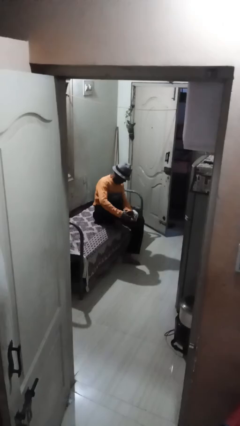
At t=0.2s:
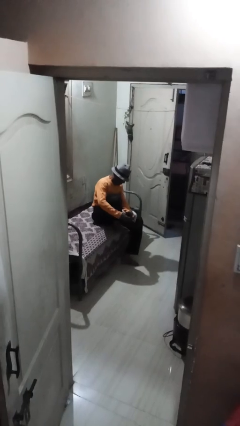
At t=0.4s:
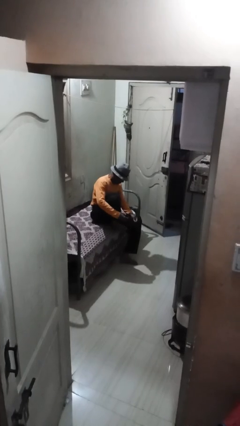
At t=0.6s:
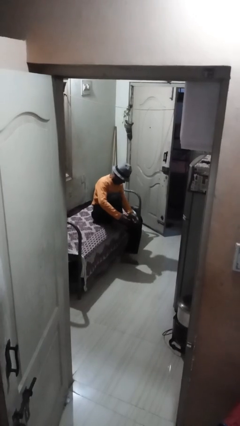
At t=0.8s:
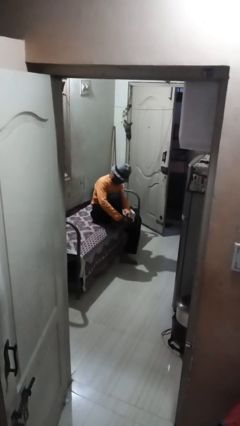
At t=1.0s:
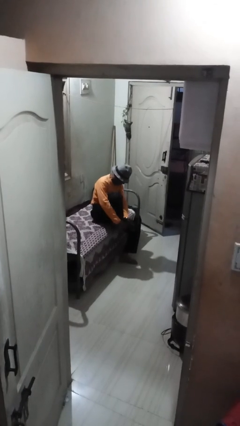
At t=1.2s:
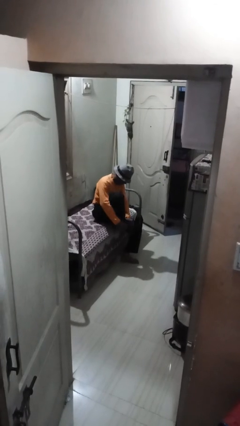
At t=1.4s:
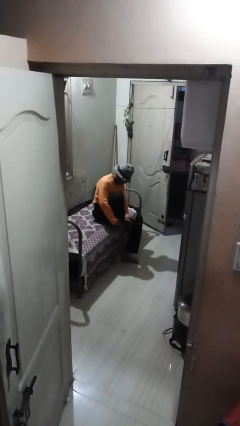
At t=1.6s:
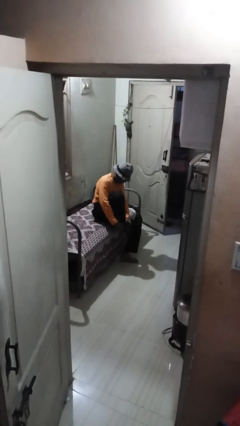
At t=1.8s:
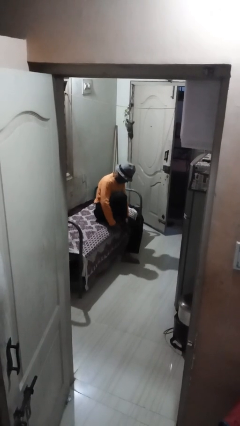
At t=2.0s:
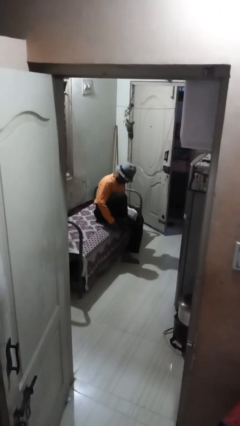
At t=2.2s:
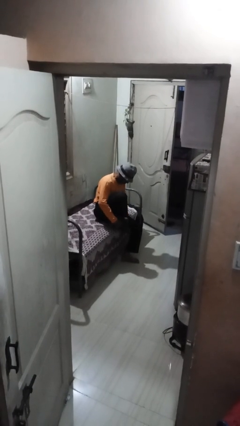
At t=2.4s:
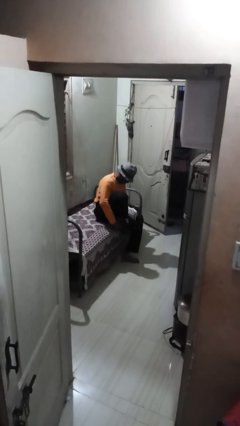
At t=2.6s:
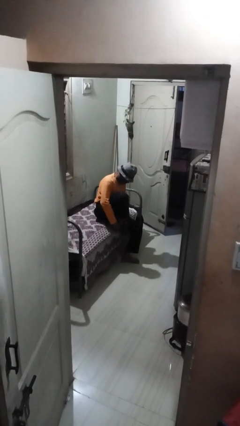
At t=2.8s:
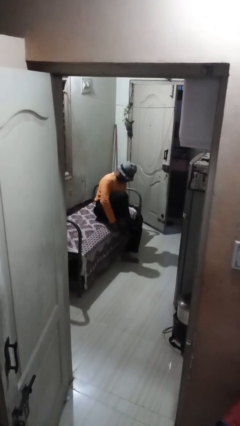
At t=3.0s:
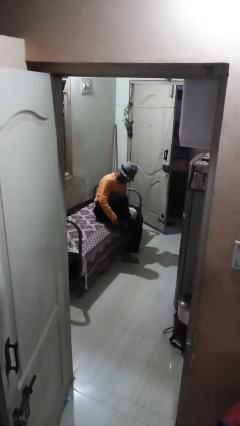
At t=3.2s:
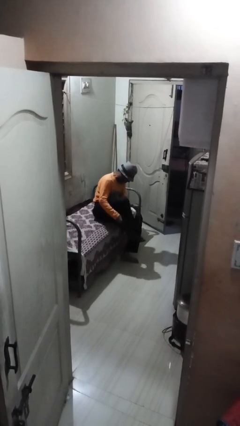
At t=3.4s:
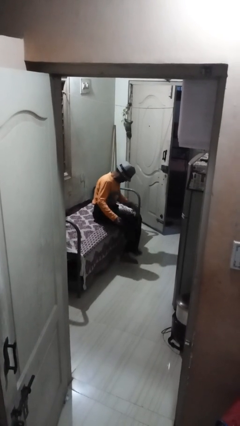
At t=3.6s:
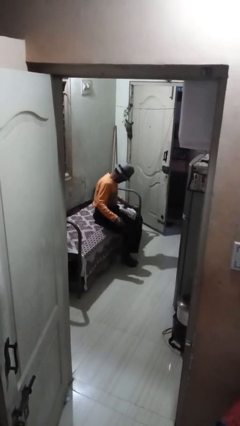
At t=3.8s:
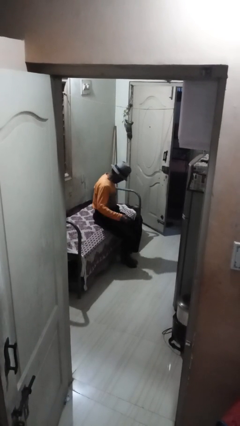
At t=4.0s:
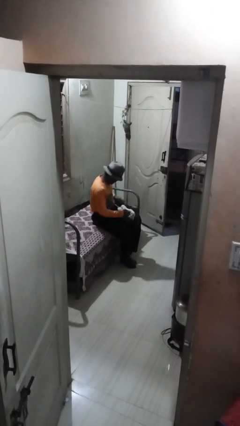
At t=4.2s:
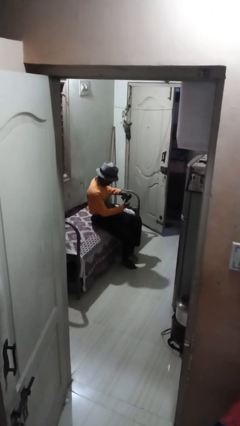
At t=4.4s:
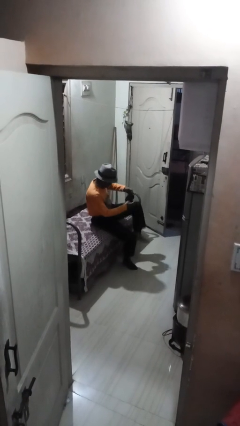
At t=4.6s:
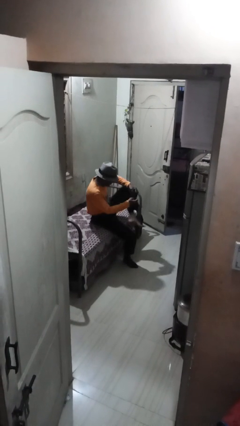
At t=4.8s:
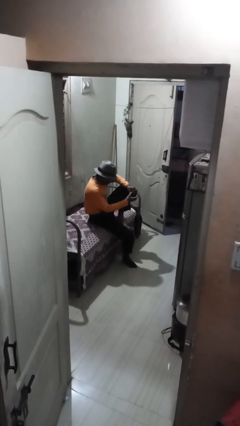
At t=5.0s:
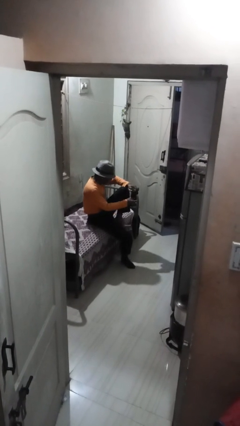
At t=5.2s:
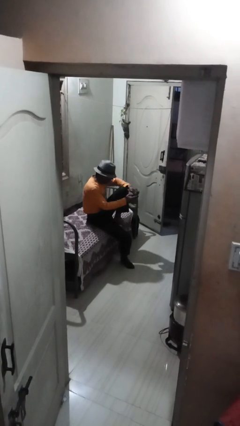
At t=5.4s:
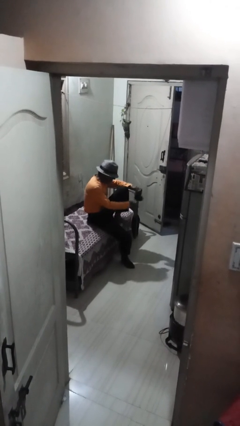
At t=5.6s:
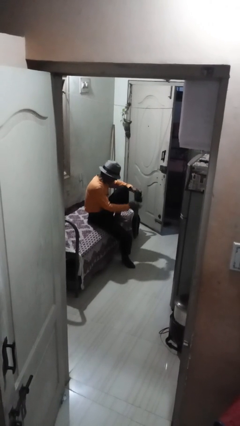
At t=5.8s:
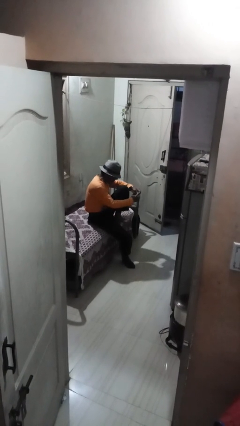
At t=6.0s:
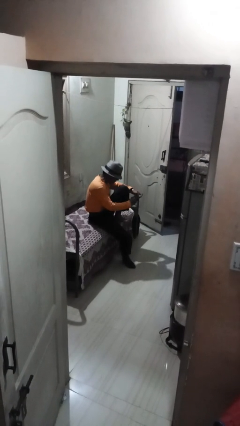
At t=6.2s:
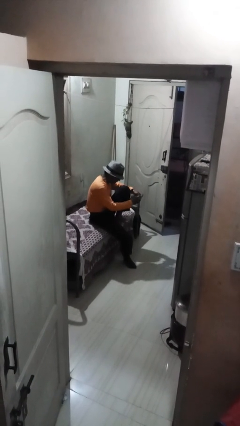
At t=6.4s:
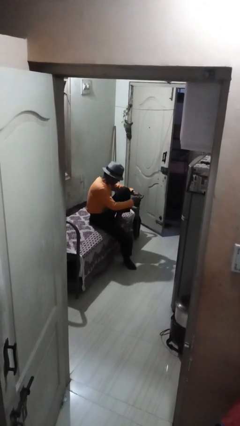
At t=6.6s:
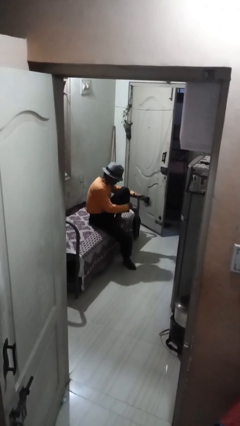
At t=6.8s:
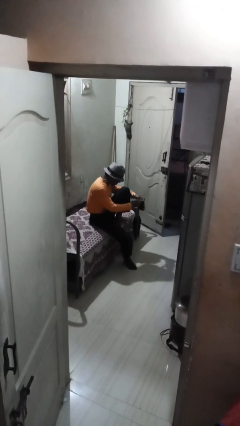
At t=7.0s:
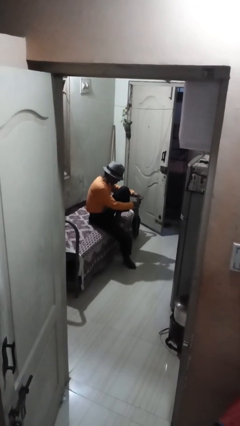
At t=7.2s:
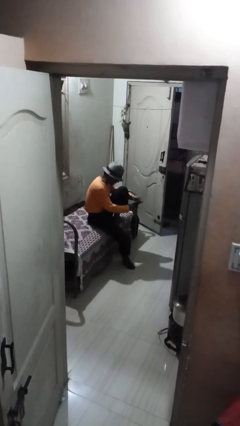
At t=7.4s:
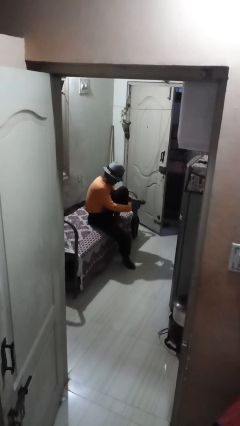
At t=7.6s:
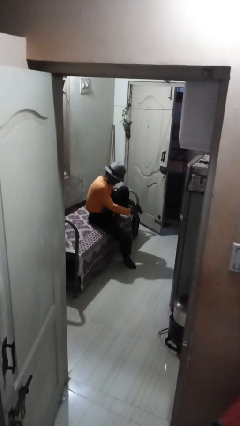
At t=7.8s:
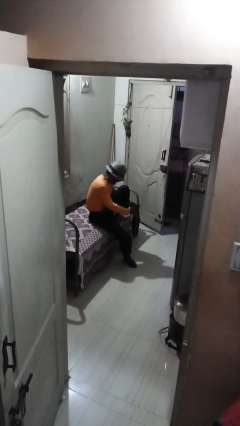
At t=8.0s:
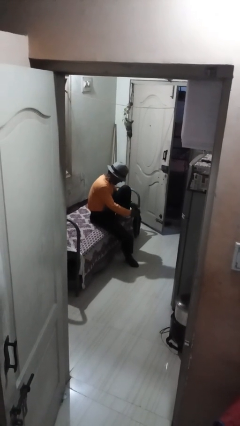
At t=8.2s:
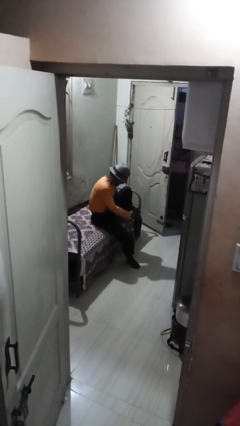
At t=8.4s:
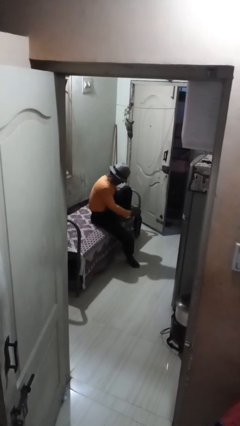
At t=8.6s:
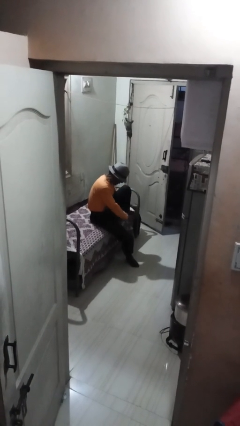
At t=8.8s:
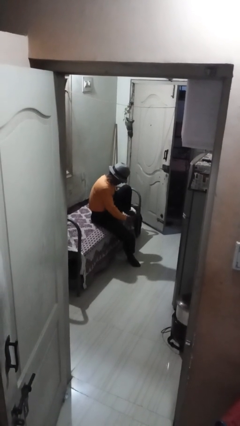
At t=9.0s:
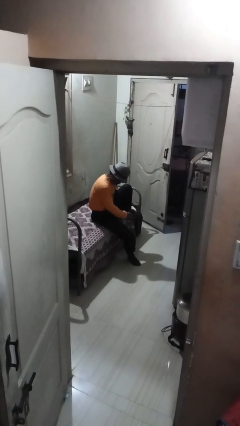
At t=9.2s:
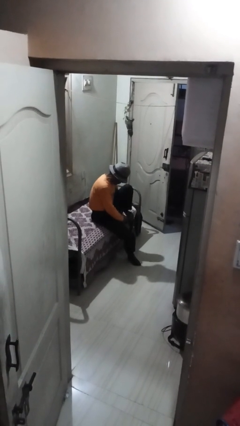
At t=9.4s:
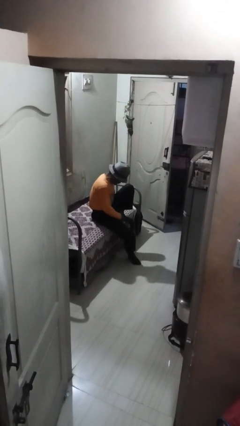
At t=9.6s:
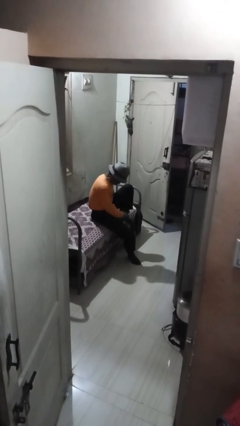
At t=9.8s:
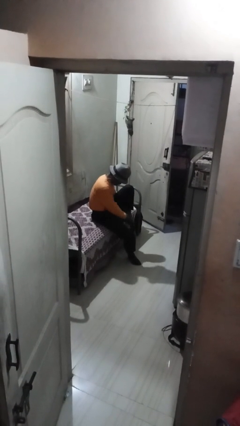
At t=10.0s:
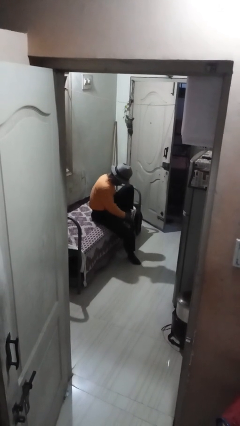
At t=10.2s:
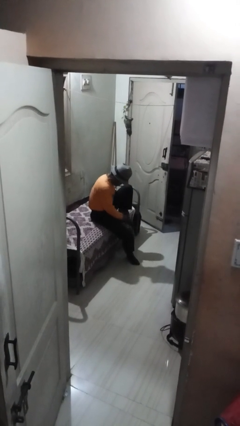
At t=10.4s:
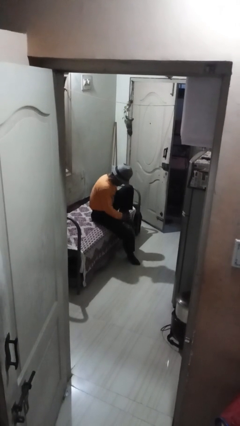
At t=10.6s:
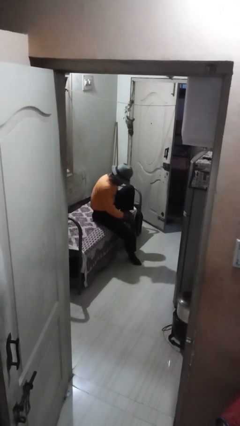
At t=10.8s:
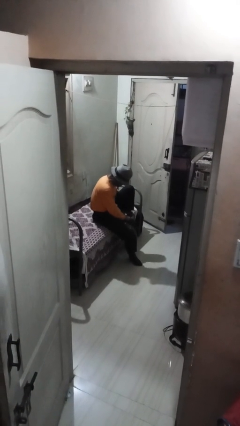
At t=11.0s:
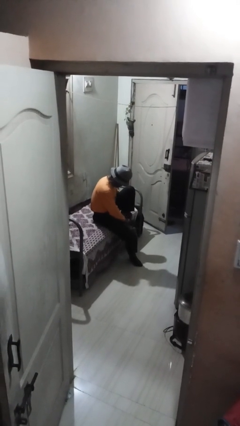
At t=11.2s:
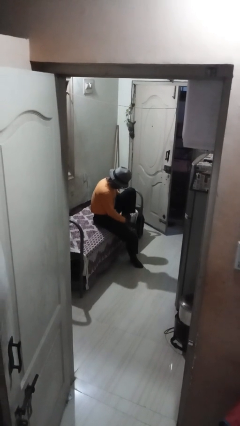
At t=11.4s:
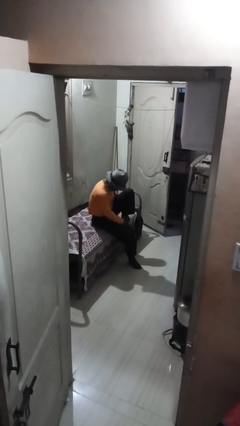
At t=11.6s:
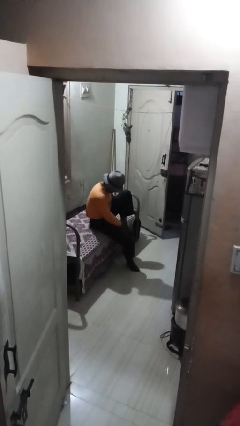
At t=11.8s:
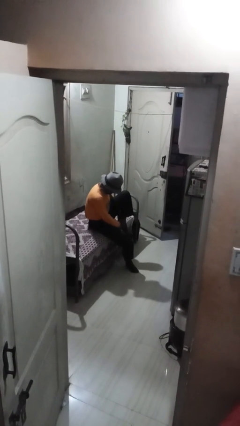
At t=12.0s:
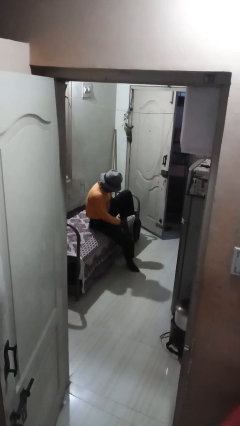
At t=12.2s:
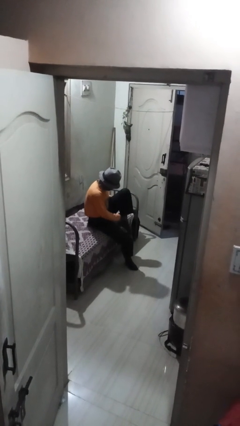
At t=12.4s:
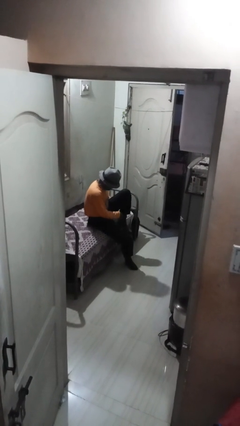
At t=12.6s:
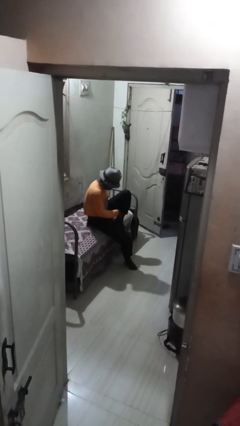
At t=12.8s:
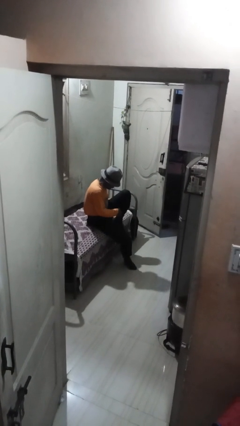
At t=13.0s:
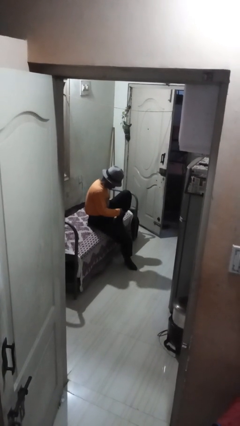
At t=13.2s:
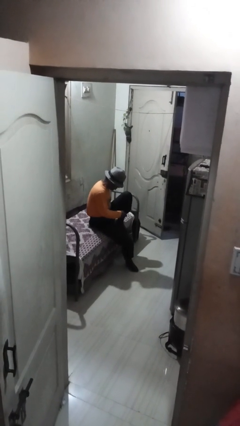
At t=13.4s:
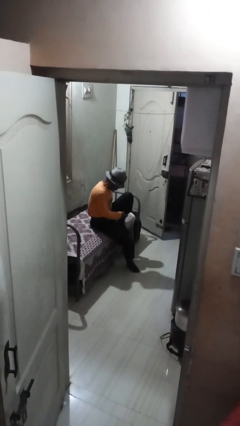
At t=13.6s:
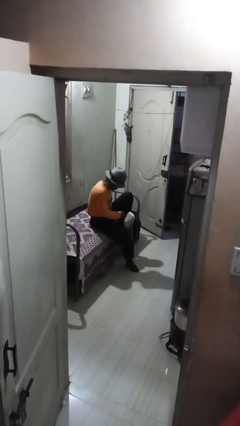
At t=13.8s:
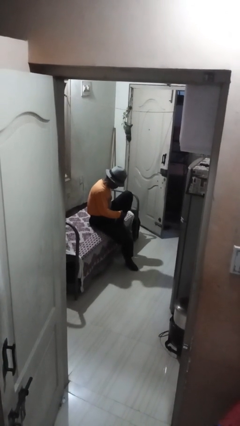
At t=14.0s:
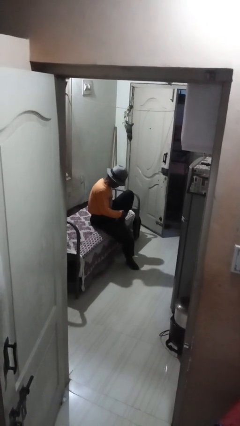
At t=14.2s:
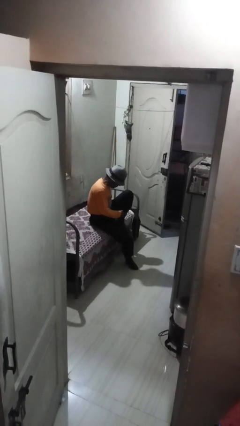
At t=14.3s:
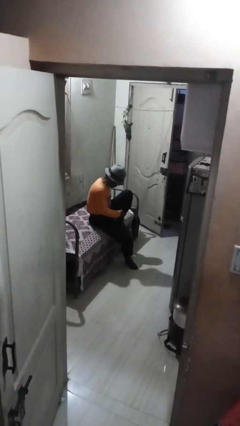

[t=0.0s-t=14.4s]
person puts on socks

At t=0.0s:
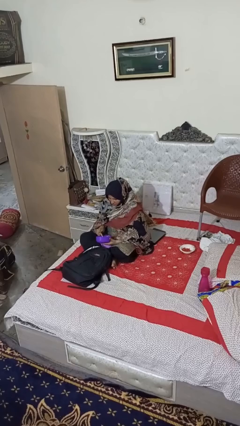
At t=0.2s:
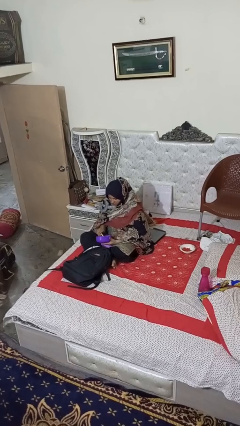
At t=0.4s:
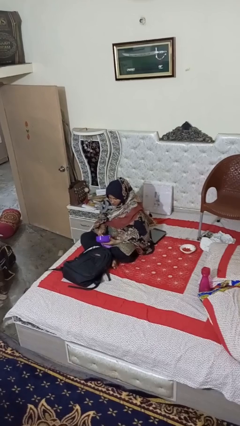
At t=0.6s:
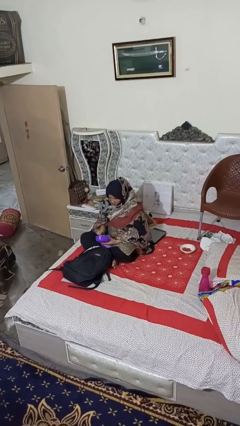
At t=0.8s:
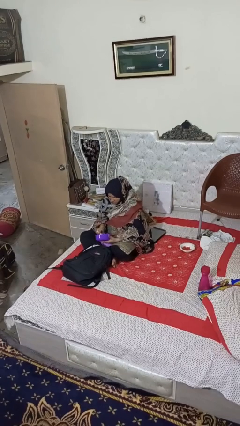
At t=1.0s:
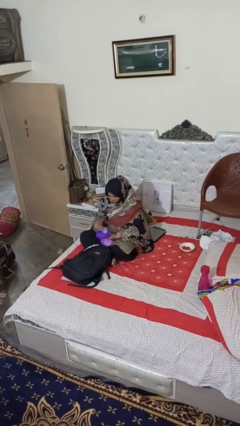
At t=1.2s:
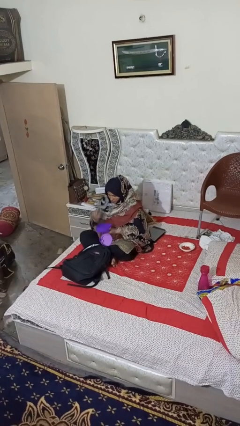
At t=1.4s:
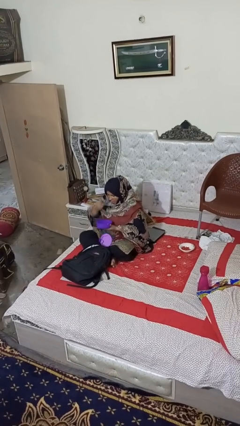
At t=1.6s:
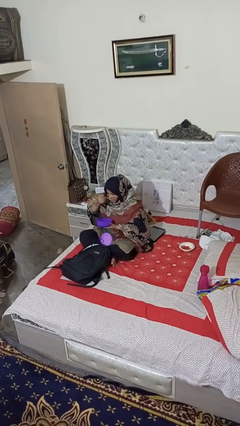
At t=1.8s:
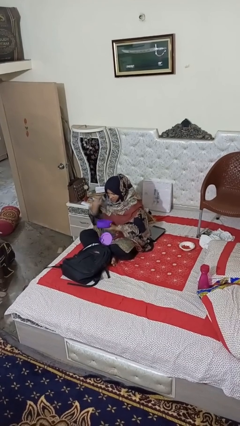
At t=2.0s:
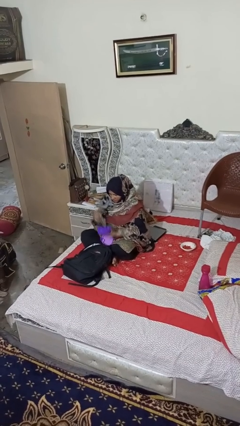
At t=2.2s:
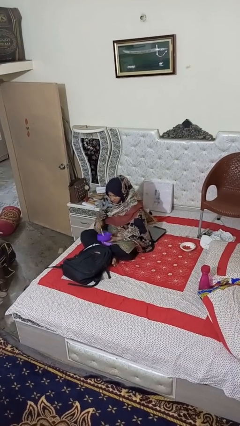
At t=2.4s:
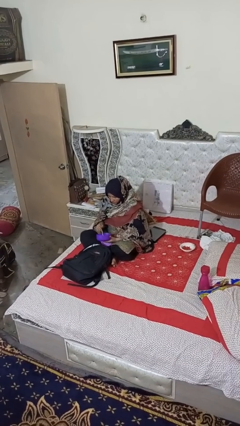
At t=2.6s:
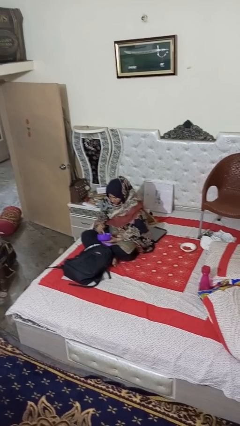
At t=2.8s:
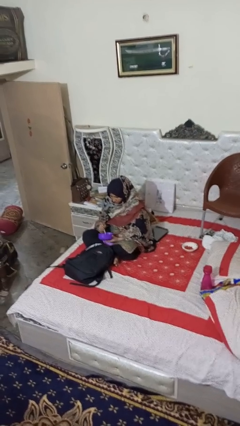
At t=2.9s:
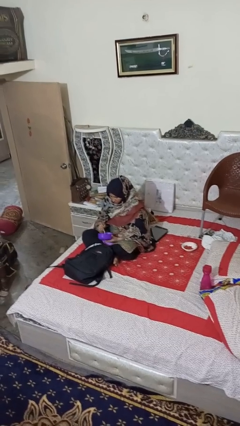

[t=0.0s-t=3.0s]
person eats snack from bag

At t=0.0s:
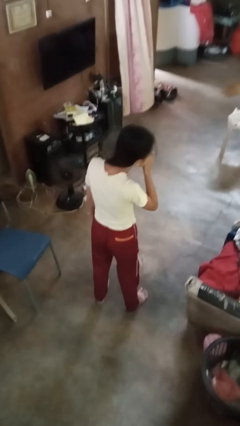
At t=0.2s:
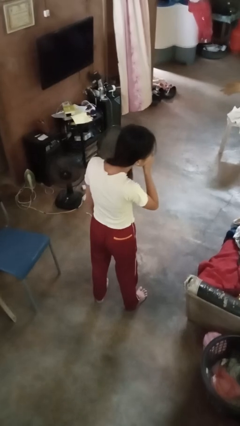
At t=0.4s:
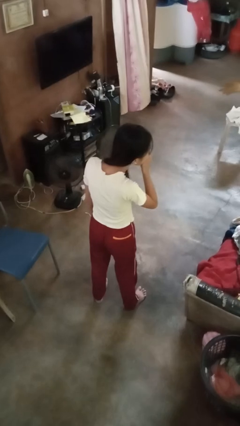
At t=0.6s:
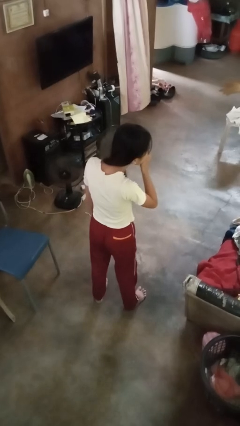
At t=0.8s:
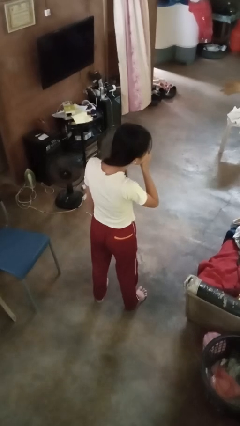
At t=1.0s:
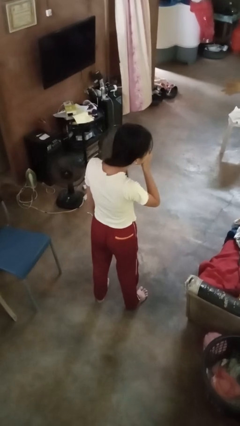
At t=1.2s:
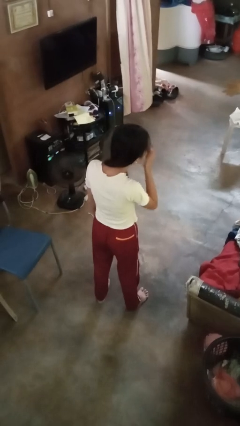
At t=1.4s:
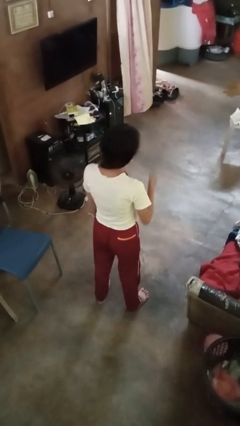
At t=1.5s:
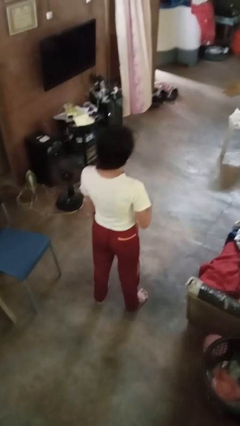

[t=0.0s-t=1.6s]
person sneezes into hand
